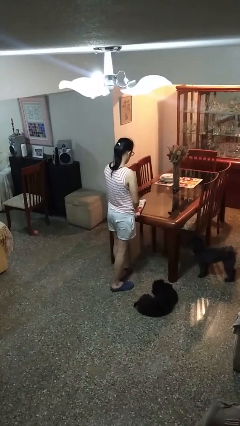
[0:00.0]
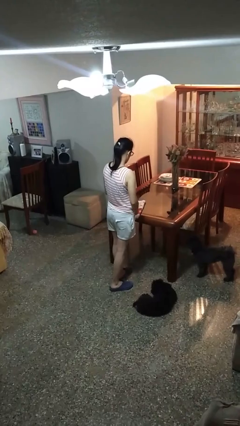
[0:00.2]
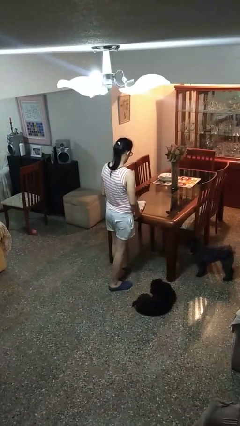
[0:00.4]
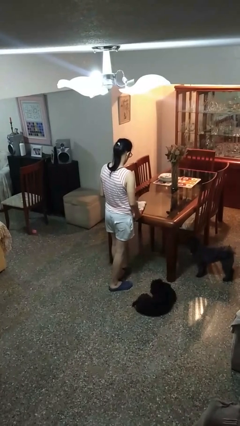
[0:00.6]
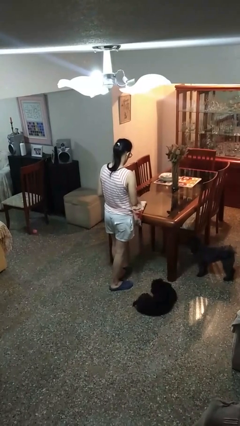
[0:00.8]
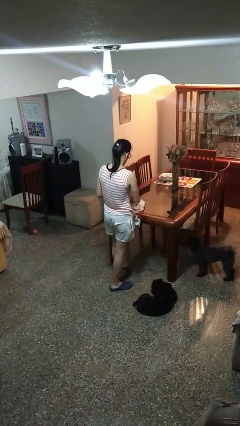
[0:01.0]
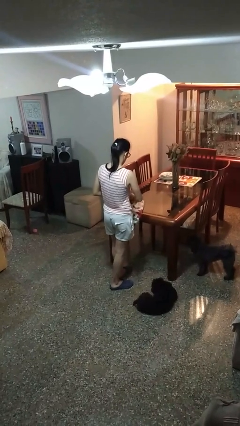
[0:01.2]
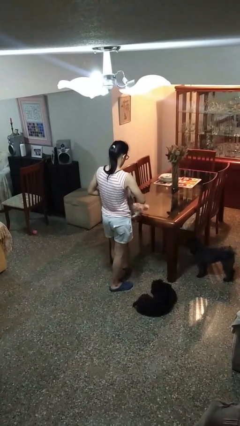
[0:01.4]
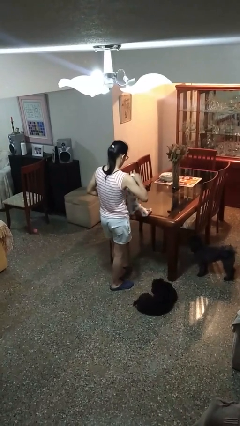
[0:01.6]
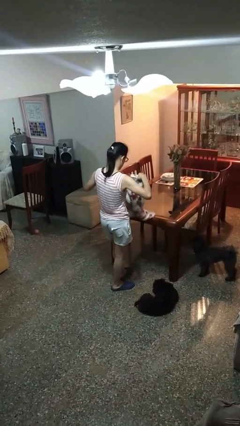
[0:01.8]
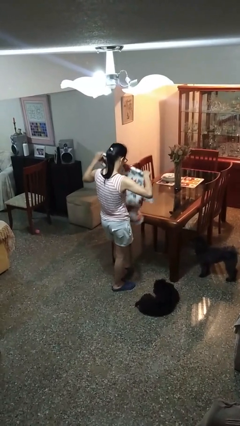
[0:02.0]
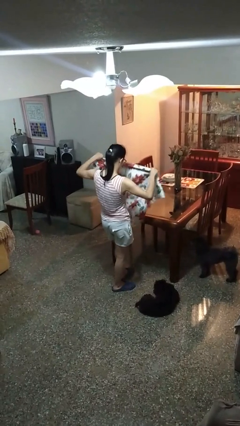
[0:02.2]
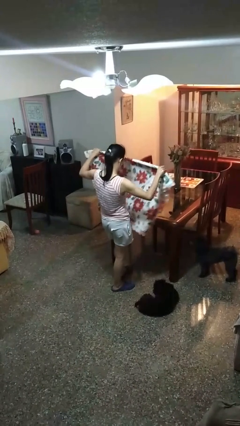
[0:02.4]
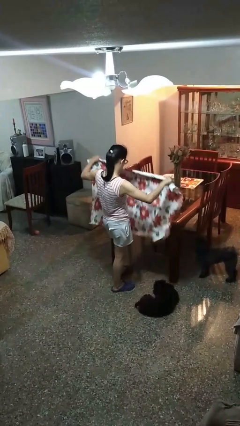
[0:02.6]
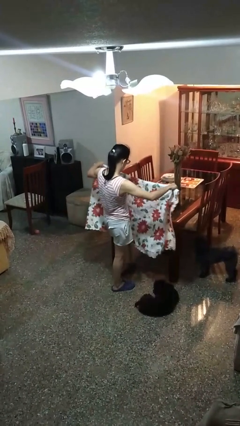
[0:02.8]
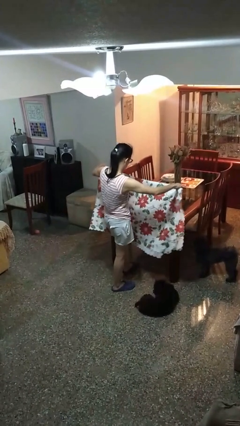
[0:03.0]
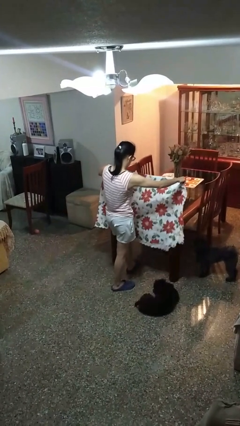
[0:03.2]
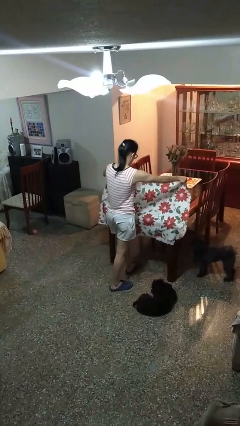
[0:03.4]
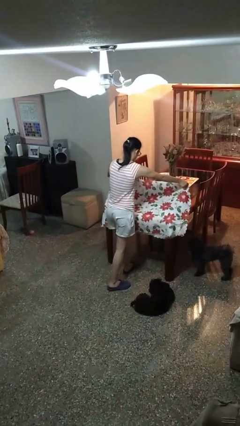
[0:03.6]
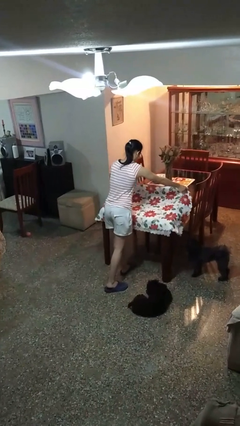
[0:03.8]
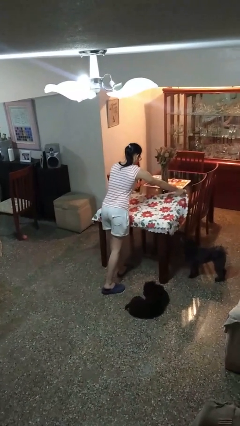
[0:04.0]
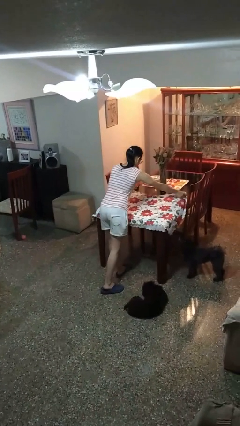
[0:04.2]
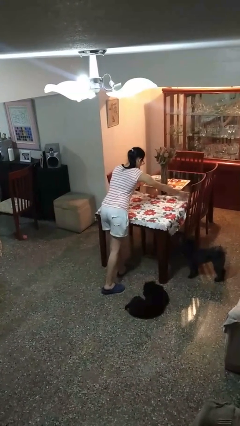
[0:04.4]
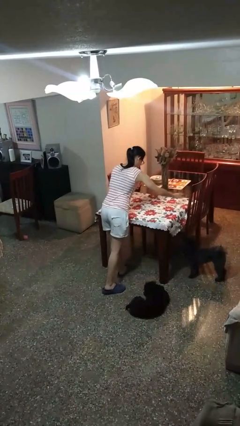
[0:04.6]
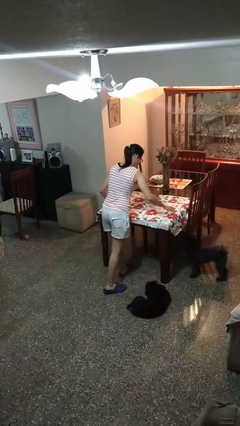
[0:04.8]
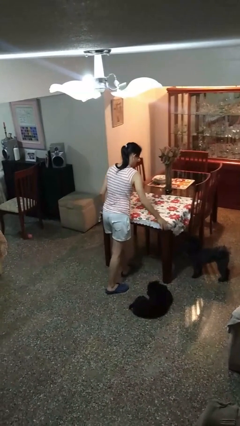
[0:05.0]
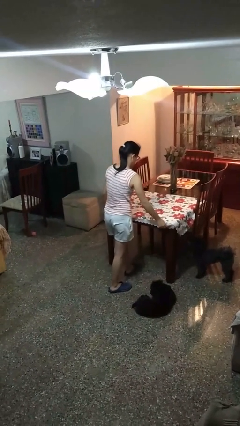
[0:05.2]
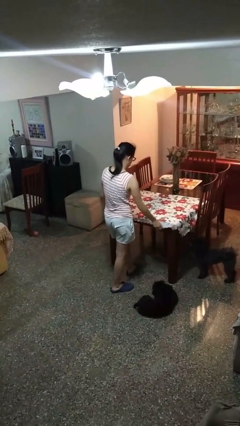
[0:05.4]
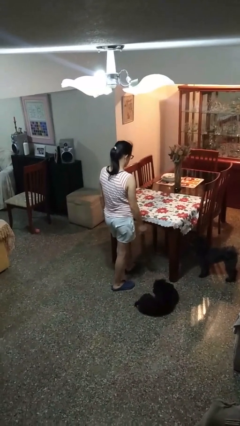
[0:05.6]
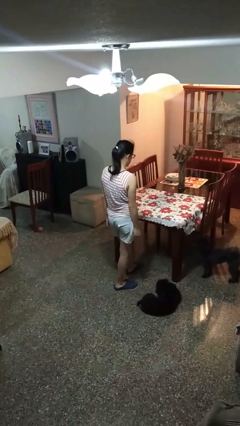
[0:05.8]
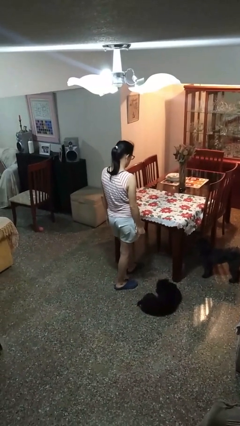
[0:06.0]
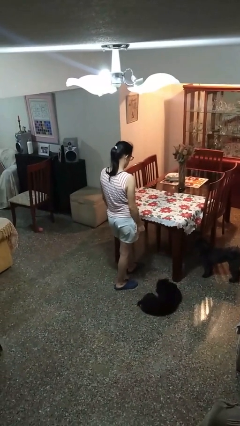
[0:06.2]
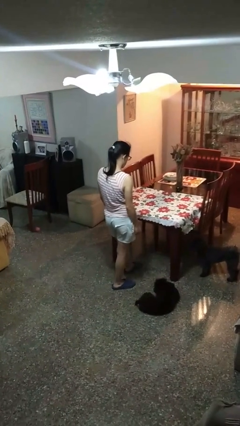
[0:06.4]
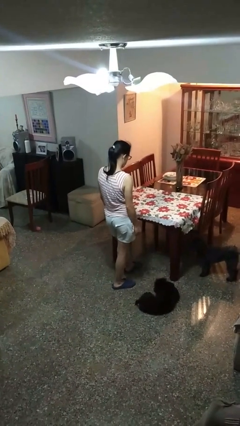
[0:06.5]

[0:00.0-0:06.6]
person spreads tablecloth

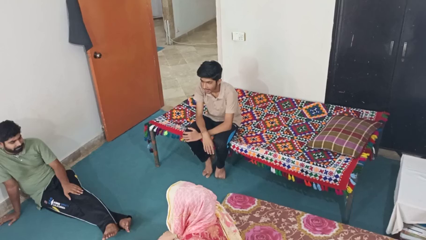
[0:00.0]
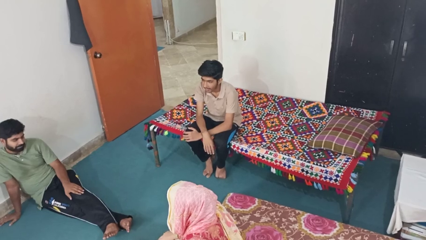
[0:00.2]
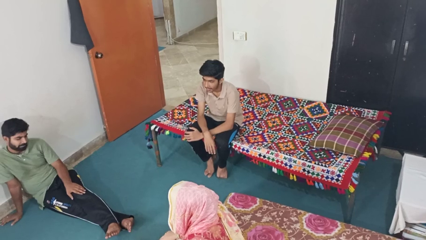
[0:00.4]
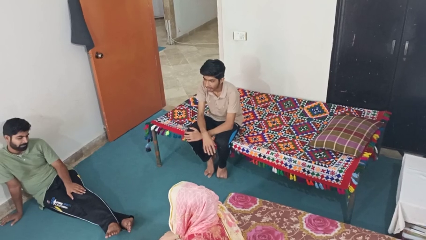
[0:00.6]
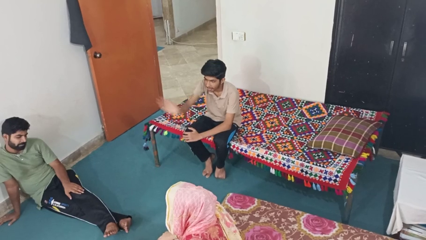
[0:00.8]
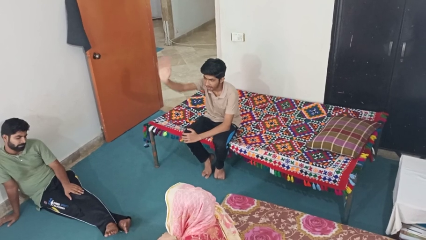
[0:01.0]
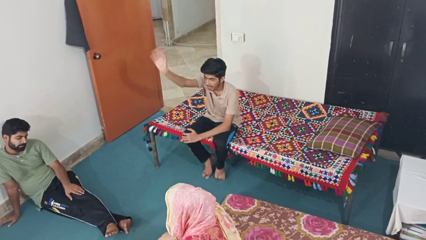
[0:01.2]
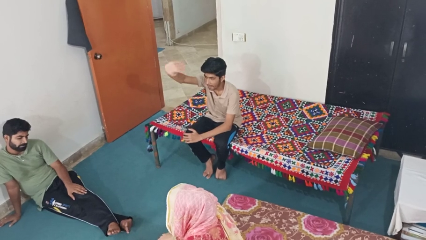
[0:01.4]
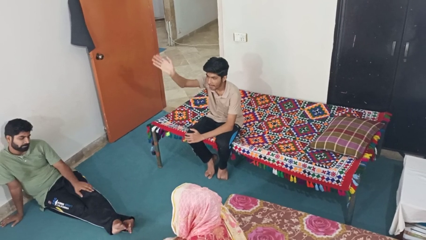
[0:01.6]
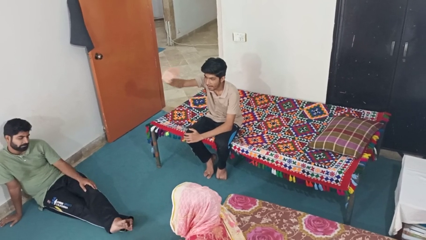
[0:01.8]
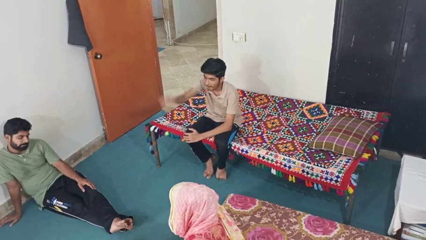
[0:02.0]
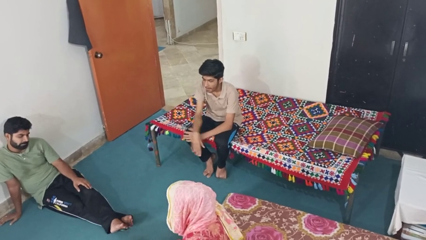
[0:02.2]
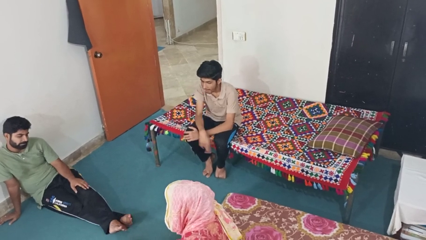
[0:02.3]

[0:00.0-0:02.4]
person waves at person

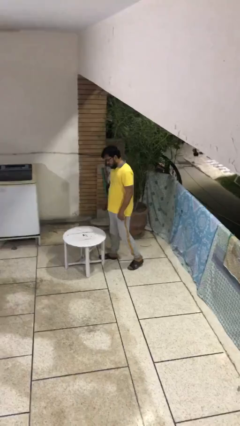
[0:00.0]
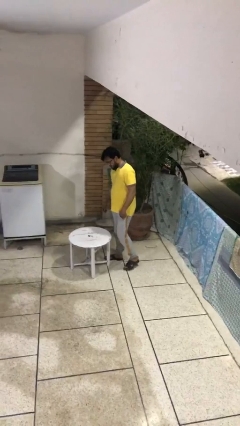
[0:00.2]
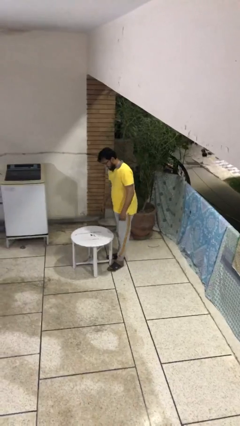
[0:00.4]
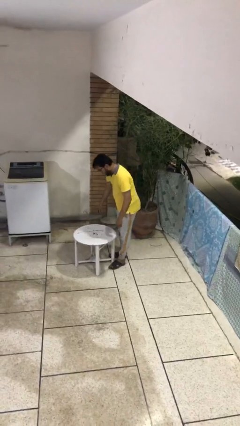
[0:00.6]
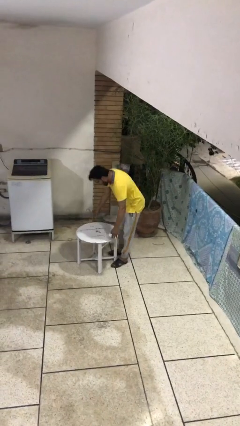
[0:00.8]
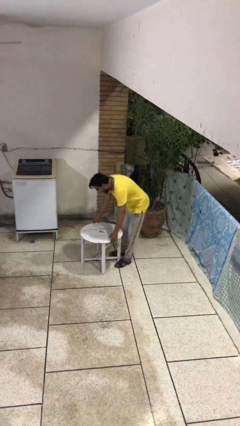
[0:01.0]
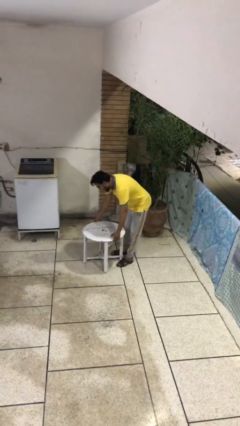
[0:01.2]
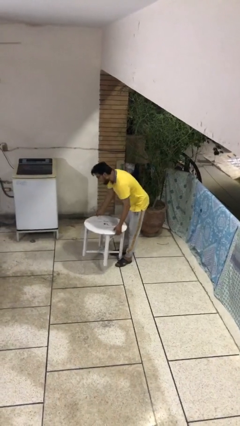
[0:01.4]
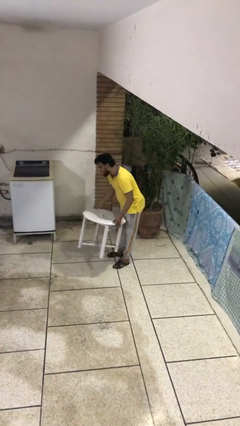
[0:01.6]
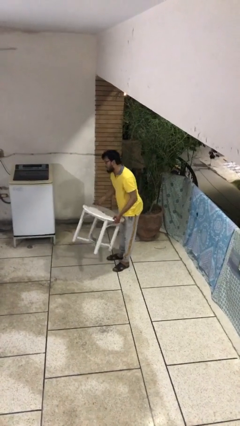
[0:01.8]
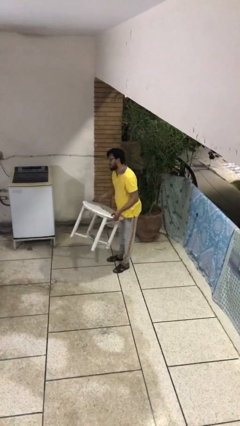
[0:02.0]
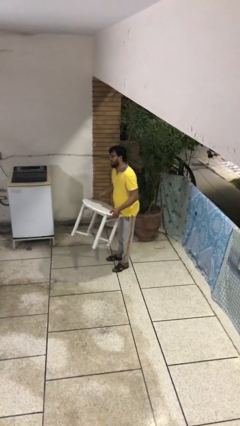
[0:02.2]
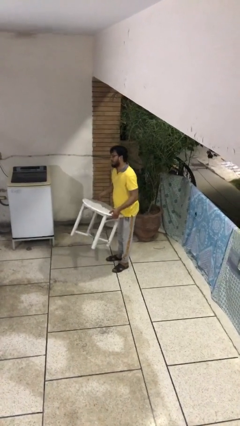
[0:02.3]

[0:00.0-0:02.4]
person picks up object from floor

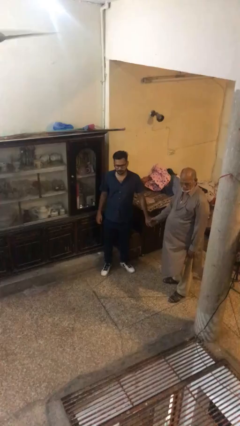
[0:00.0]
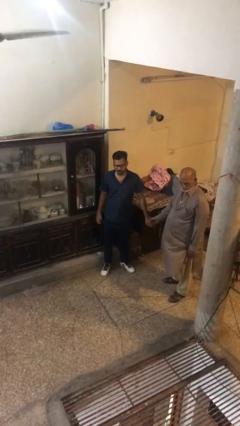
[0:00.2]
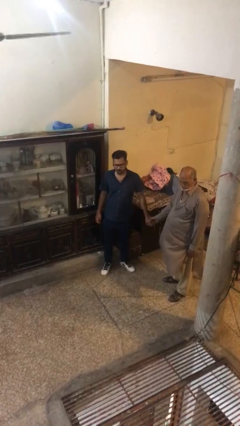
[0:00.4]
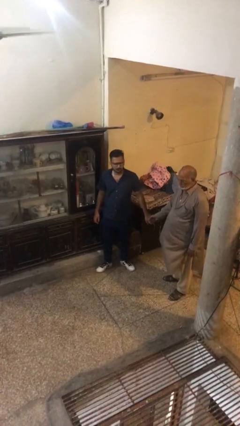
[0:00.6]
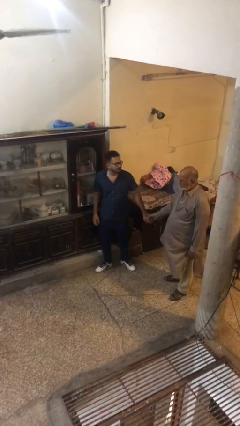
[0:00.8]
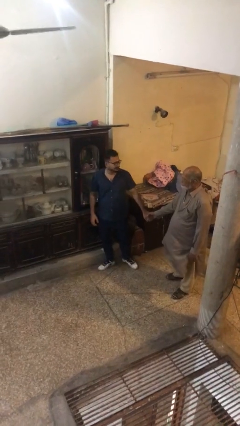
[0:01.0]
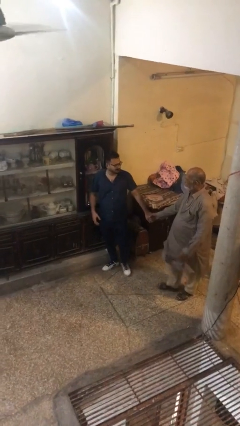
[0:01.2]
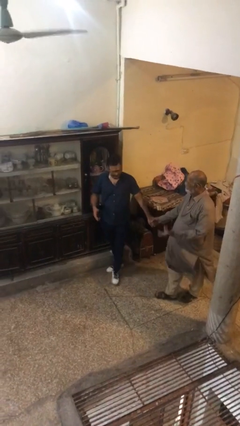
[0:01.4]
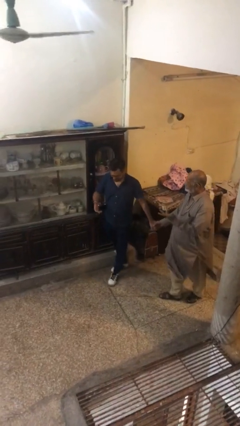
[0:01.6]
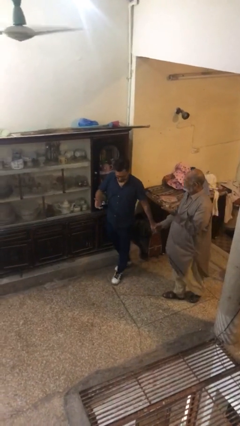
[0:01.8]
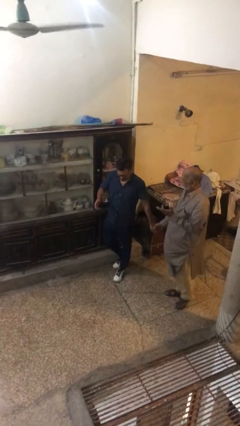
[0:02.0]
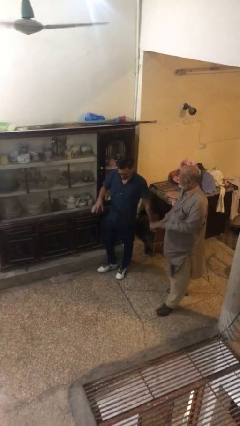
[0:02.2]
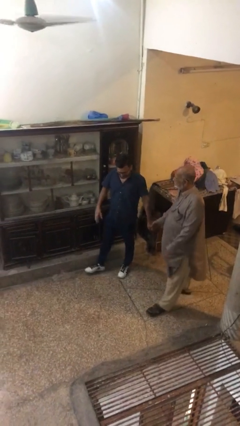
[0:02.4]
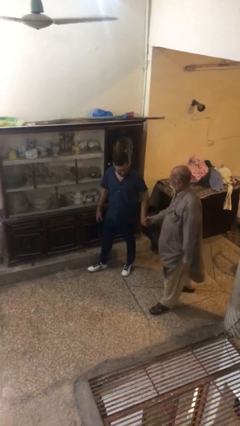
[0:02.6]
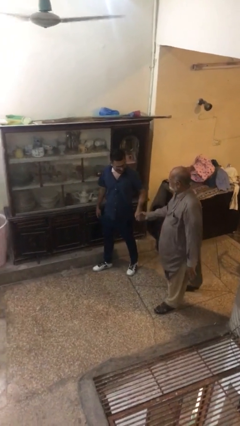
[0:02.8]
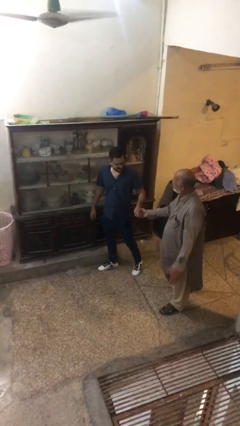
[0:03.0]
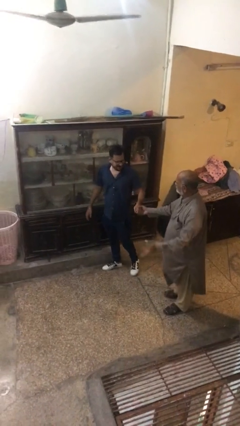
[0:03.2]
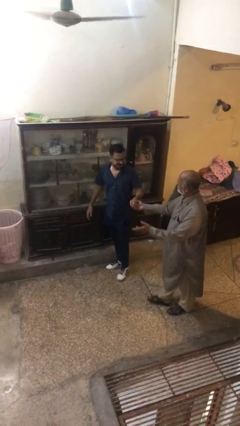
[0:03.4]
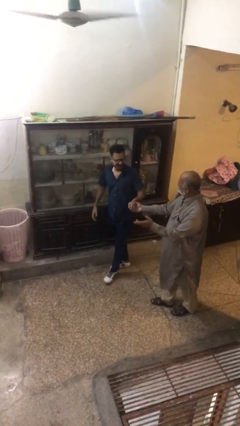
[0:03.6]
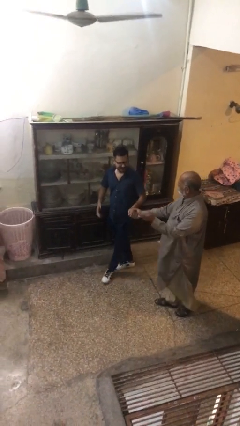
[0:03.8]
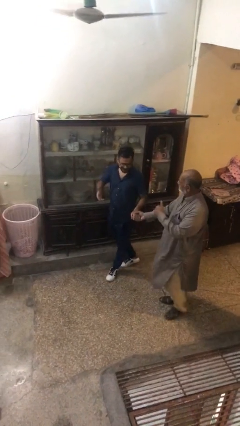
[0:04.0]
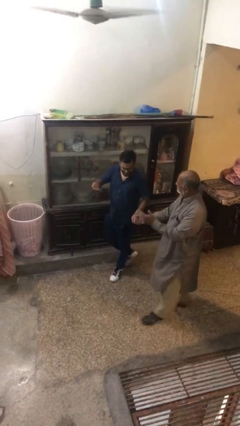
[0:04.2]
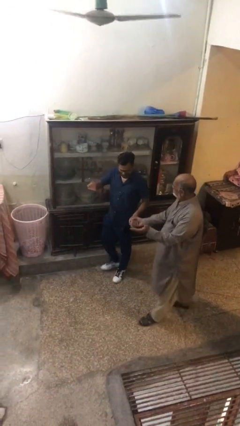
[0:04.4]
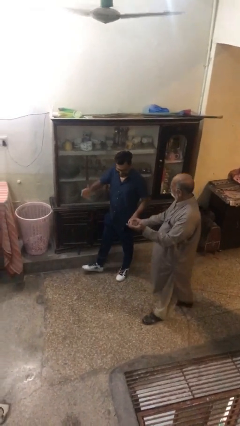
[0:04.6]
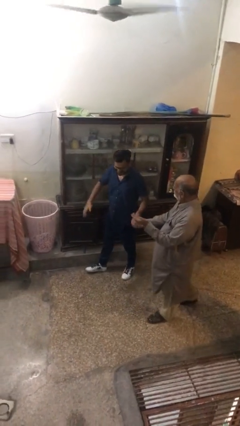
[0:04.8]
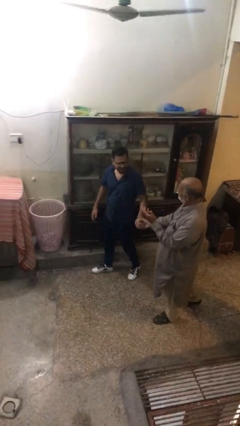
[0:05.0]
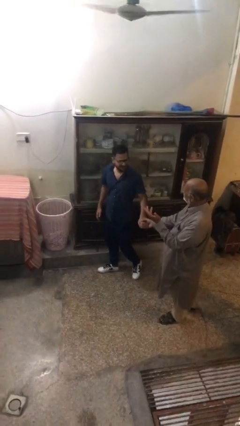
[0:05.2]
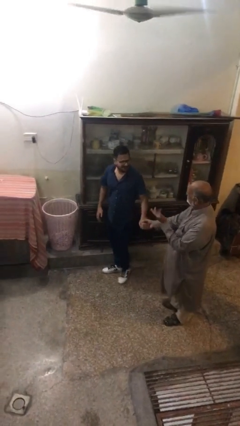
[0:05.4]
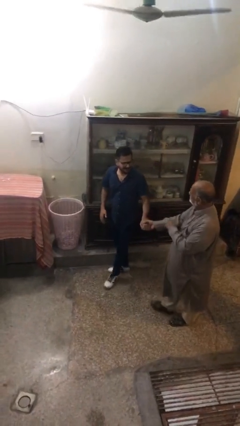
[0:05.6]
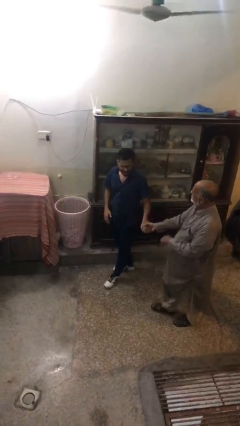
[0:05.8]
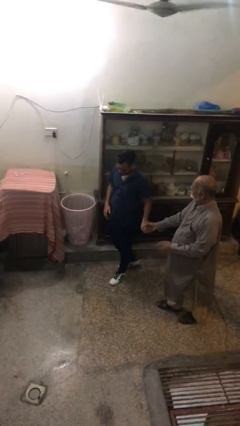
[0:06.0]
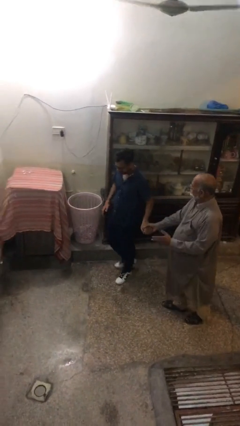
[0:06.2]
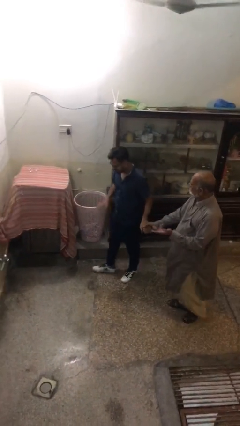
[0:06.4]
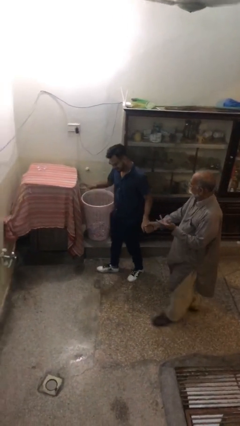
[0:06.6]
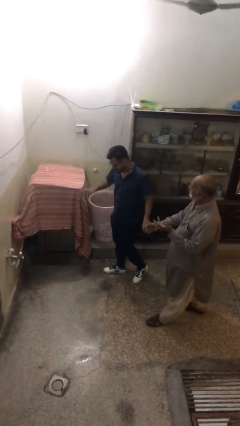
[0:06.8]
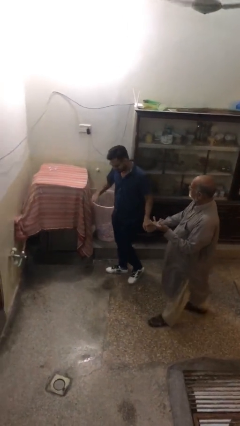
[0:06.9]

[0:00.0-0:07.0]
person holds hand
